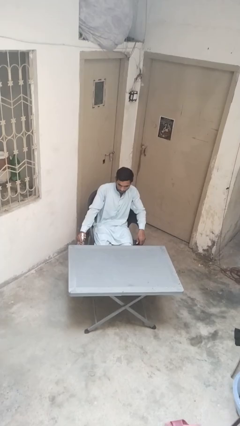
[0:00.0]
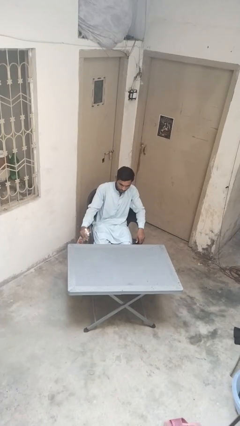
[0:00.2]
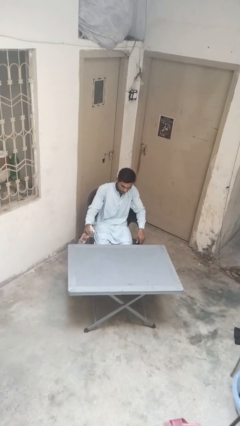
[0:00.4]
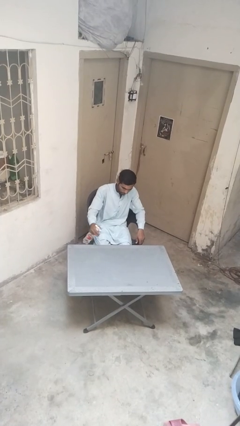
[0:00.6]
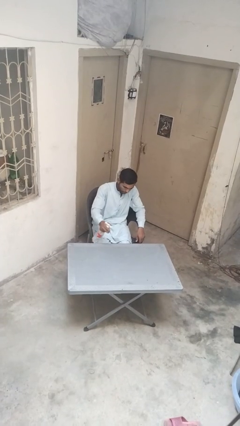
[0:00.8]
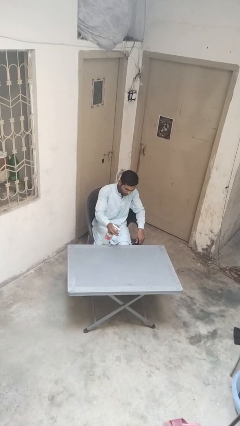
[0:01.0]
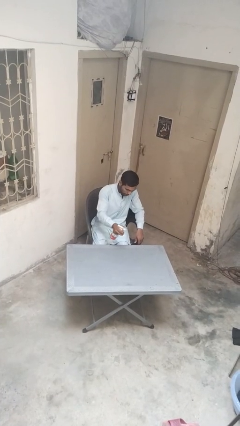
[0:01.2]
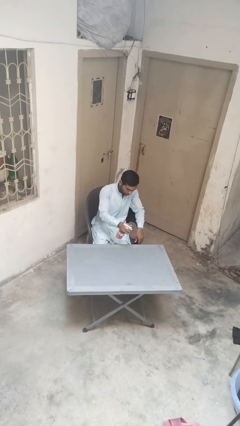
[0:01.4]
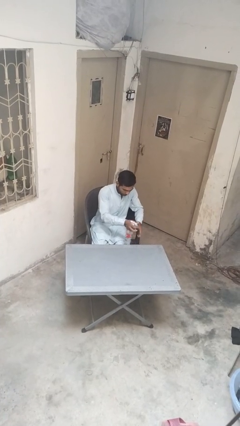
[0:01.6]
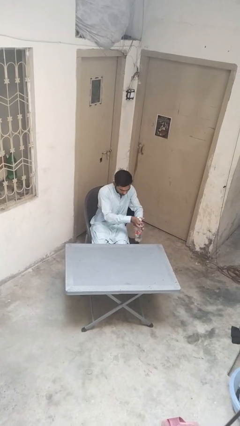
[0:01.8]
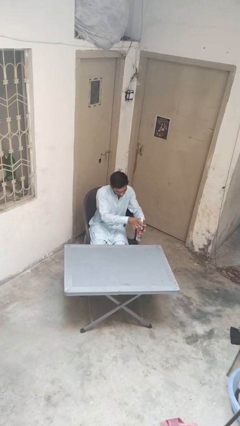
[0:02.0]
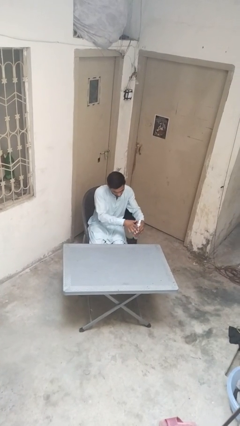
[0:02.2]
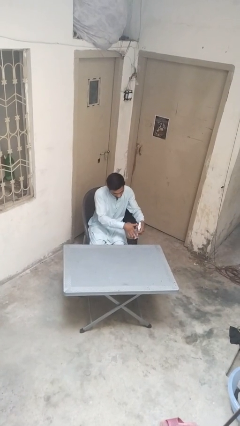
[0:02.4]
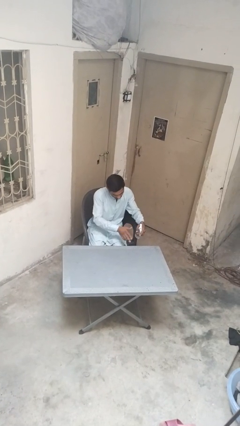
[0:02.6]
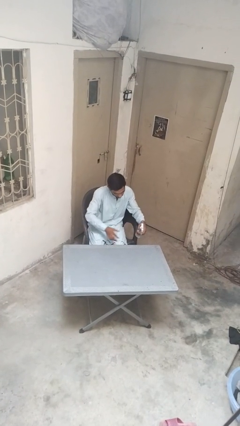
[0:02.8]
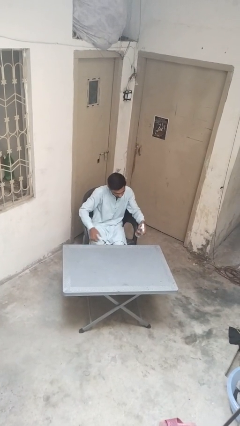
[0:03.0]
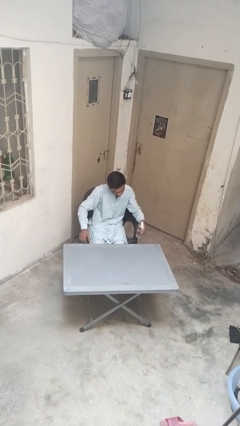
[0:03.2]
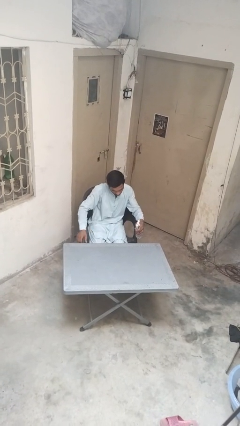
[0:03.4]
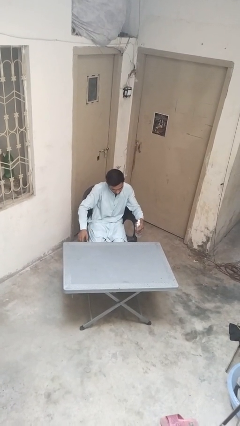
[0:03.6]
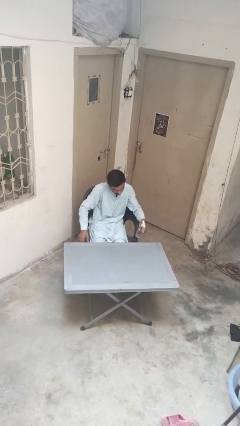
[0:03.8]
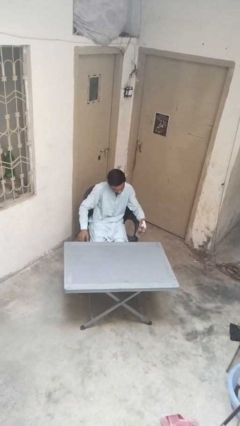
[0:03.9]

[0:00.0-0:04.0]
person sprays from bottle

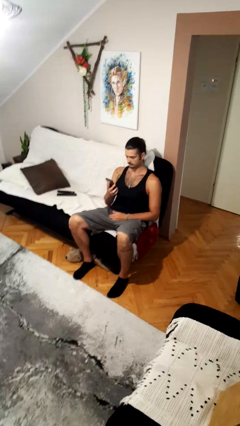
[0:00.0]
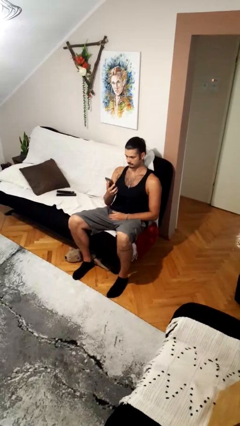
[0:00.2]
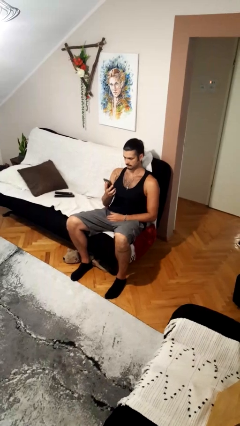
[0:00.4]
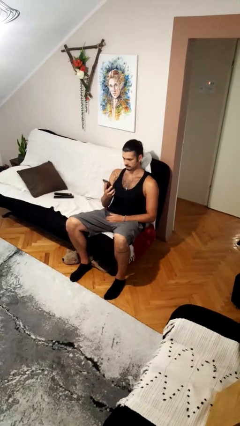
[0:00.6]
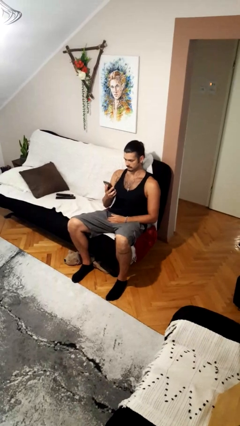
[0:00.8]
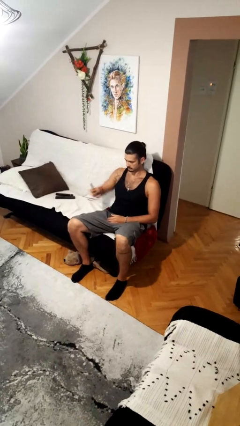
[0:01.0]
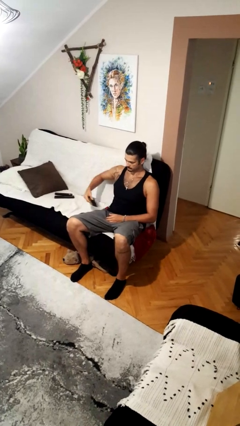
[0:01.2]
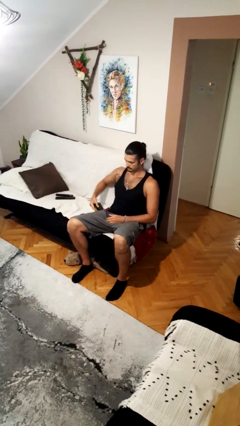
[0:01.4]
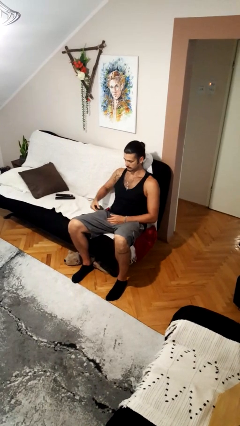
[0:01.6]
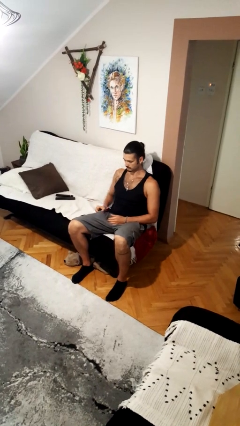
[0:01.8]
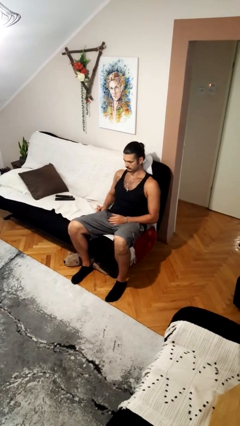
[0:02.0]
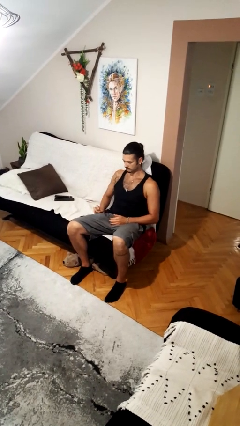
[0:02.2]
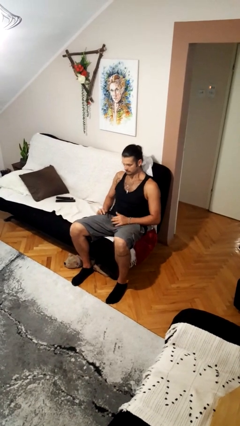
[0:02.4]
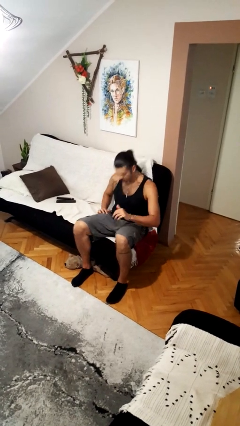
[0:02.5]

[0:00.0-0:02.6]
person puts phone into pocket

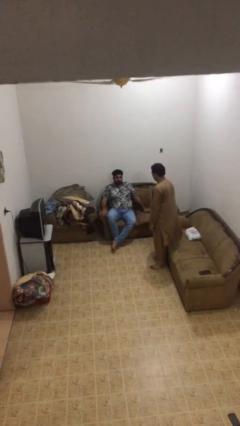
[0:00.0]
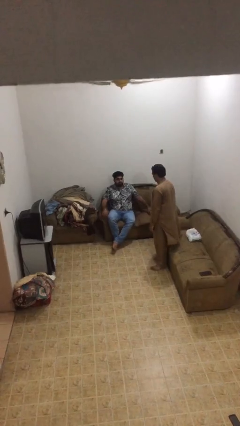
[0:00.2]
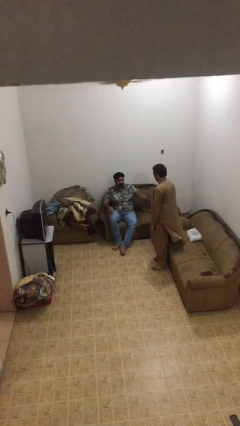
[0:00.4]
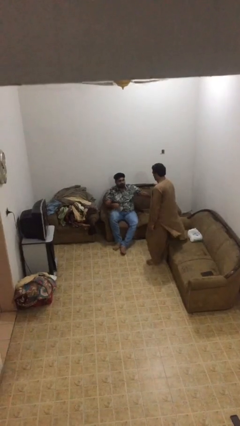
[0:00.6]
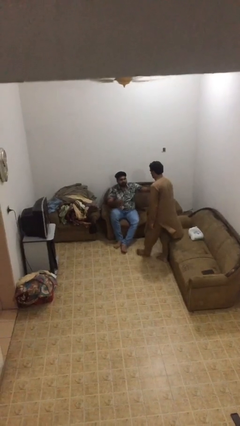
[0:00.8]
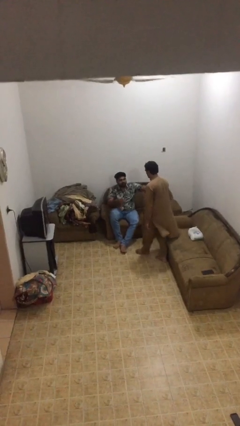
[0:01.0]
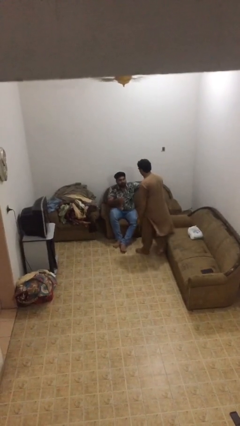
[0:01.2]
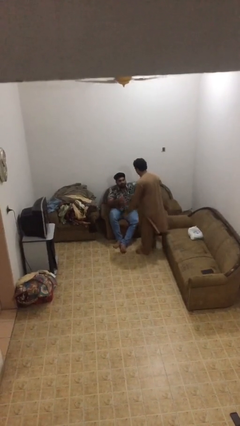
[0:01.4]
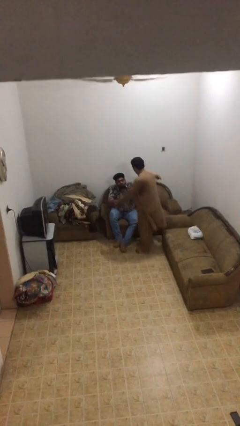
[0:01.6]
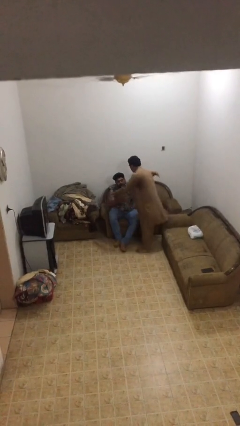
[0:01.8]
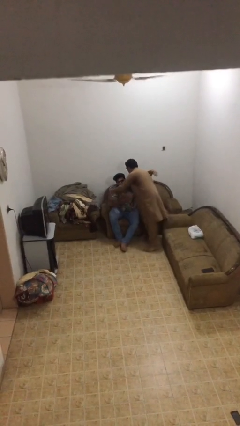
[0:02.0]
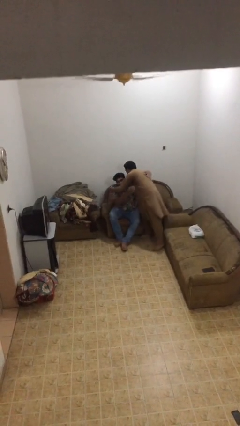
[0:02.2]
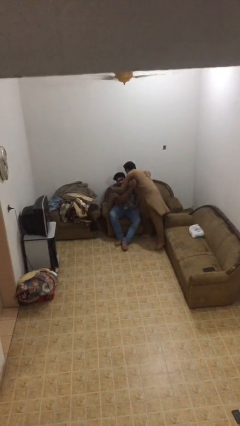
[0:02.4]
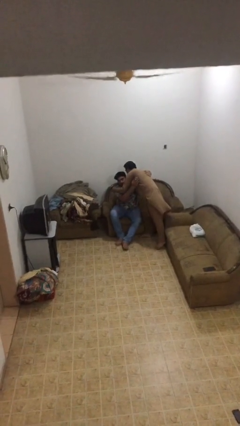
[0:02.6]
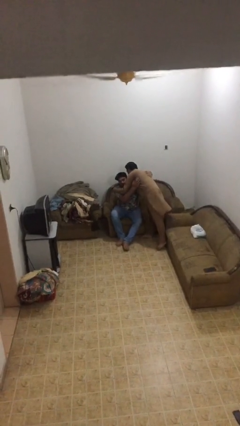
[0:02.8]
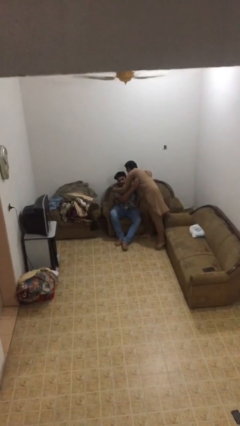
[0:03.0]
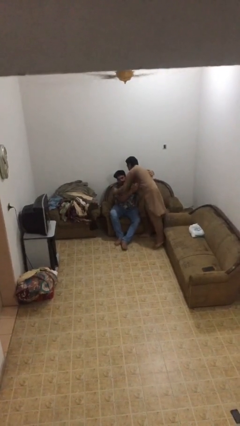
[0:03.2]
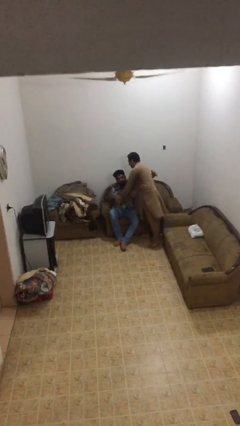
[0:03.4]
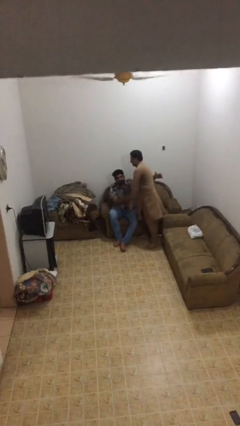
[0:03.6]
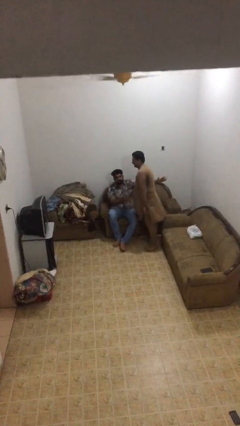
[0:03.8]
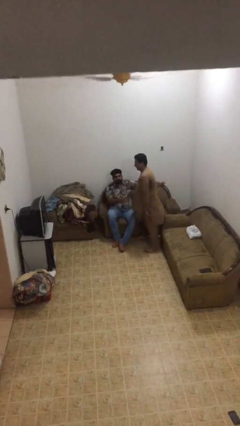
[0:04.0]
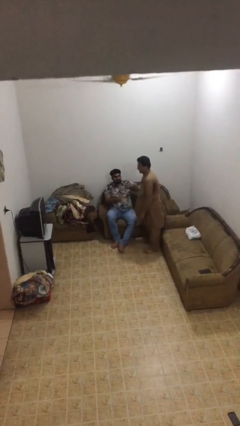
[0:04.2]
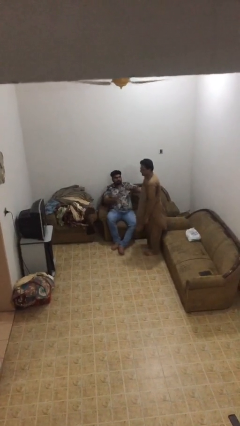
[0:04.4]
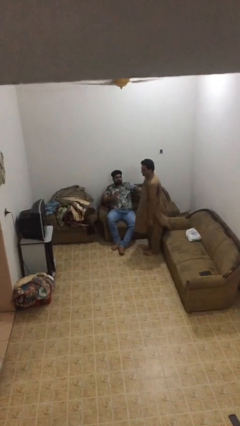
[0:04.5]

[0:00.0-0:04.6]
person embraces person

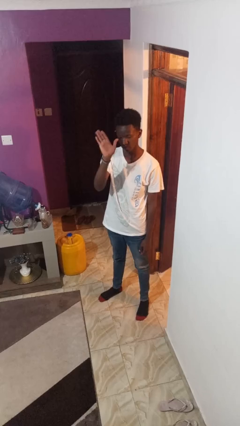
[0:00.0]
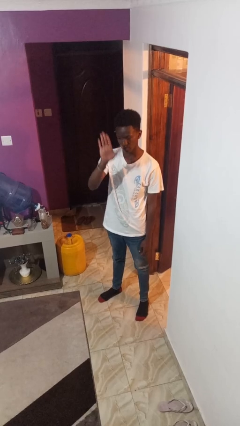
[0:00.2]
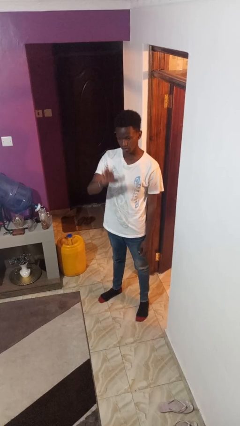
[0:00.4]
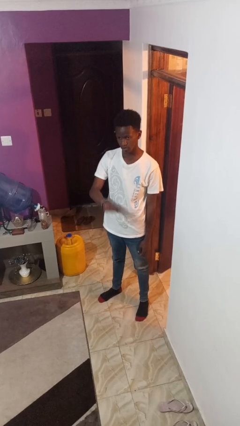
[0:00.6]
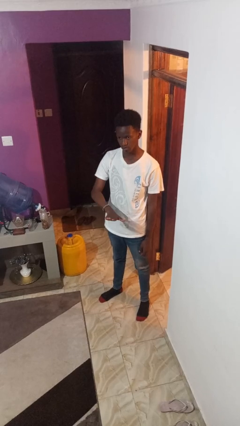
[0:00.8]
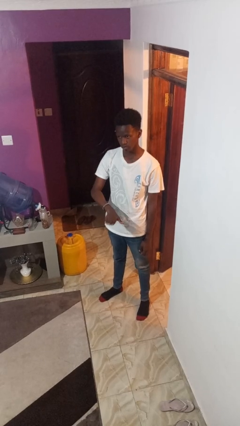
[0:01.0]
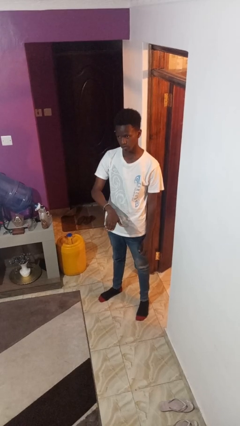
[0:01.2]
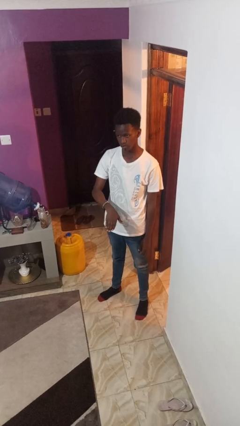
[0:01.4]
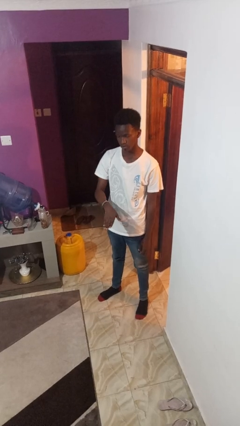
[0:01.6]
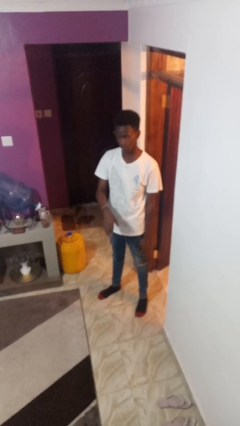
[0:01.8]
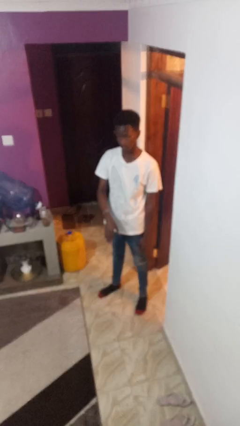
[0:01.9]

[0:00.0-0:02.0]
person gestures swipe down

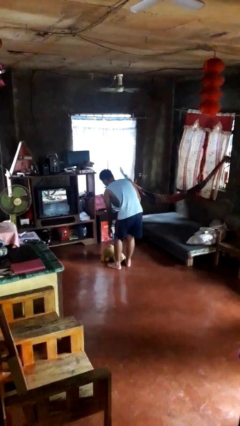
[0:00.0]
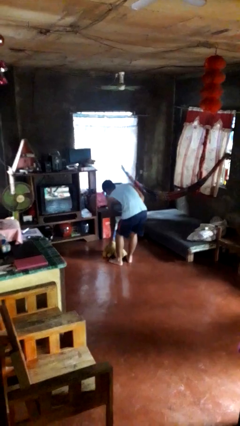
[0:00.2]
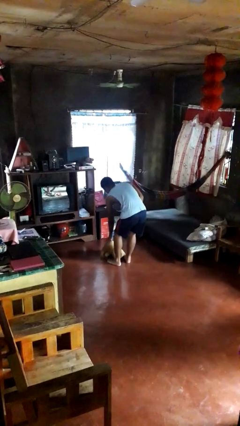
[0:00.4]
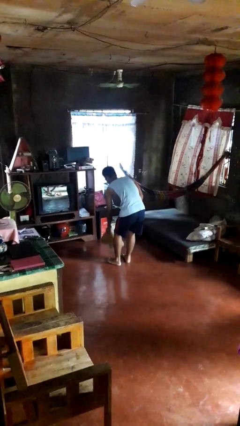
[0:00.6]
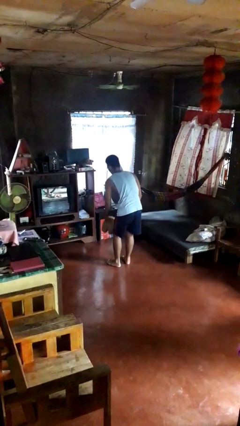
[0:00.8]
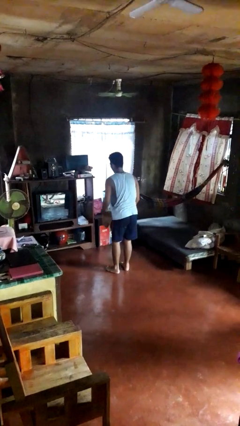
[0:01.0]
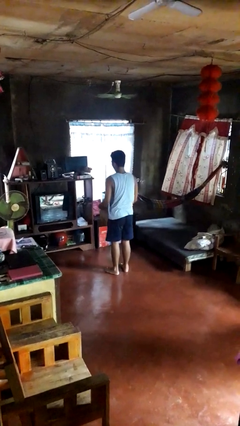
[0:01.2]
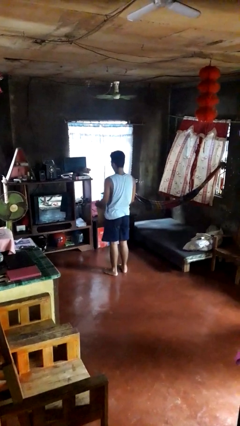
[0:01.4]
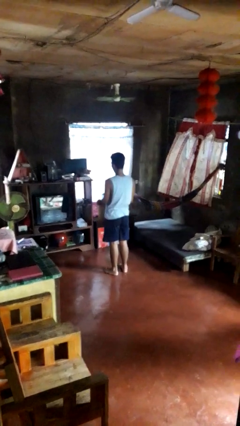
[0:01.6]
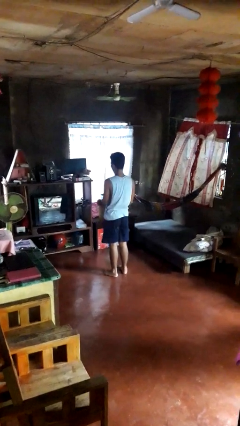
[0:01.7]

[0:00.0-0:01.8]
person picks up object from floor

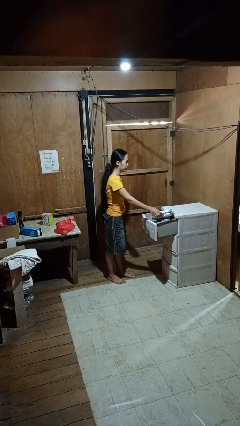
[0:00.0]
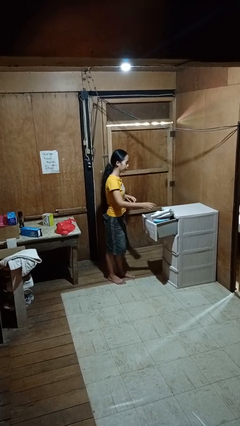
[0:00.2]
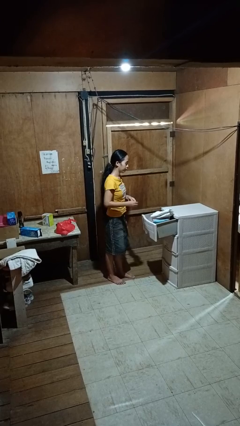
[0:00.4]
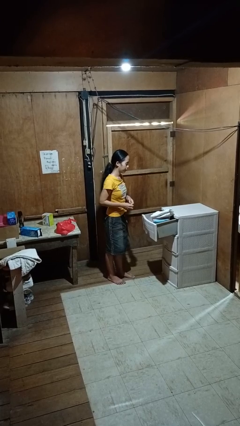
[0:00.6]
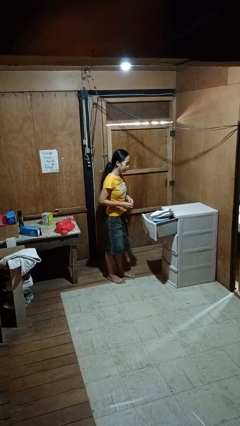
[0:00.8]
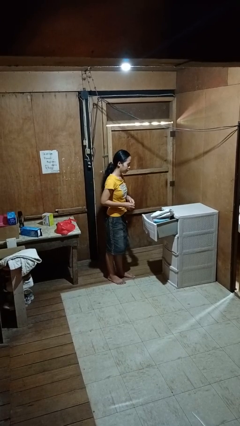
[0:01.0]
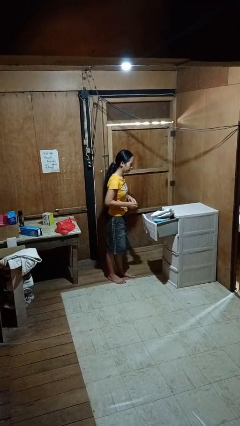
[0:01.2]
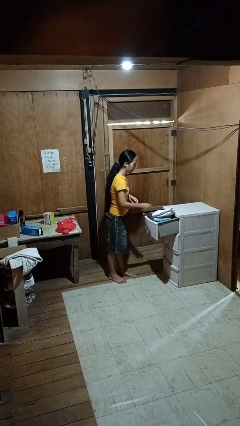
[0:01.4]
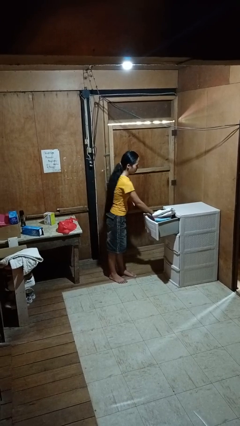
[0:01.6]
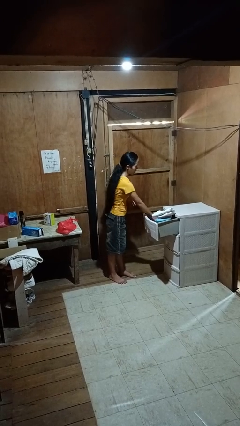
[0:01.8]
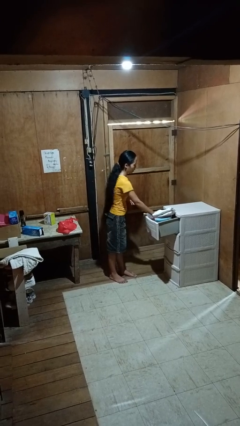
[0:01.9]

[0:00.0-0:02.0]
person puts clothes into dresser

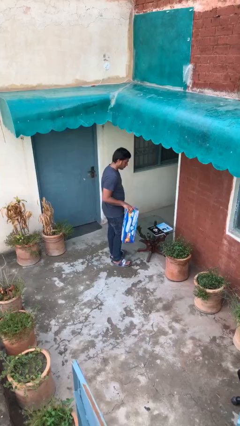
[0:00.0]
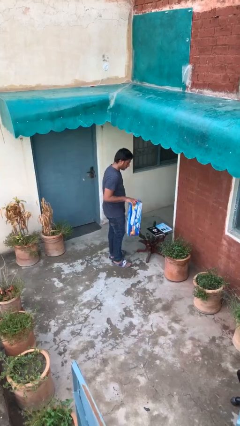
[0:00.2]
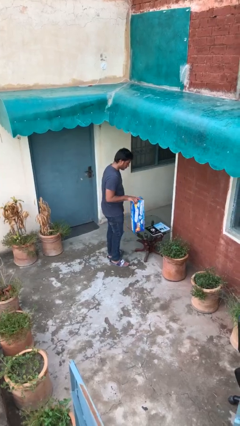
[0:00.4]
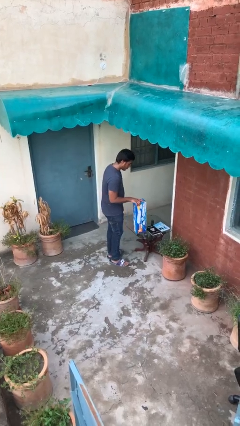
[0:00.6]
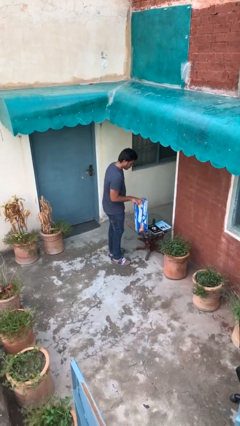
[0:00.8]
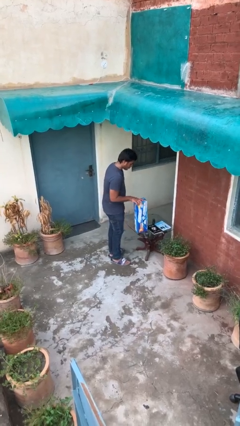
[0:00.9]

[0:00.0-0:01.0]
person puts down object on table
